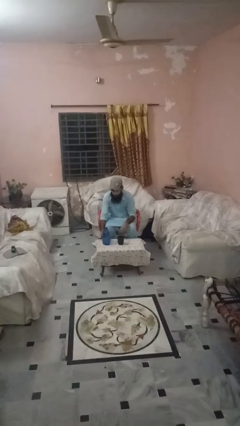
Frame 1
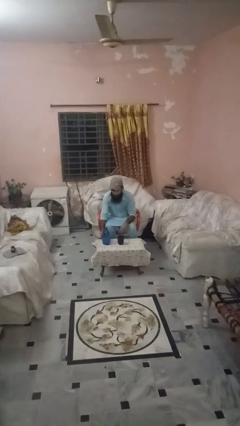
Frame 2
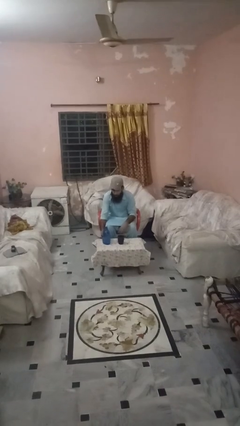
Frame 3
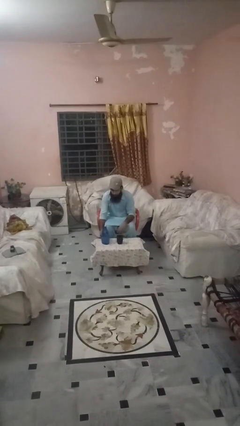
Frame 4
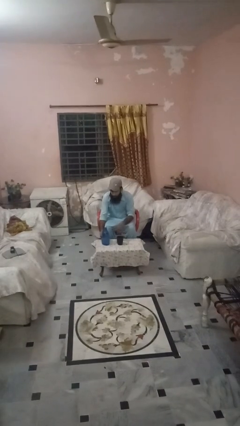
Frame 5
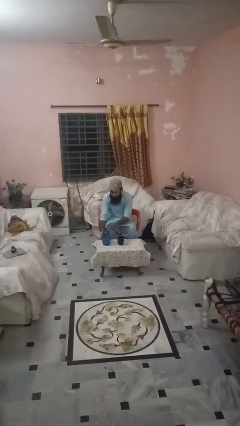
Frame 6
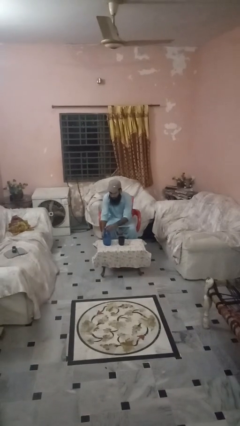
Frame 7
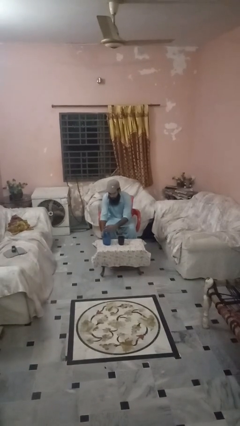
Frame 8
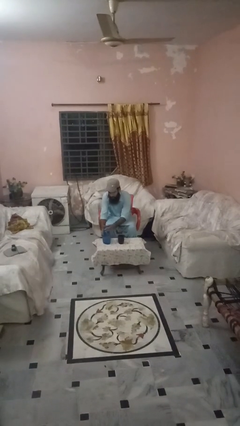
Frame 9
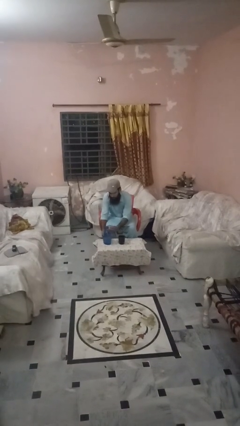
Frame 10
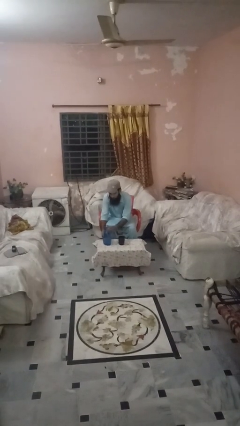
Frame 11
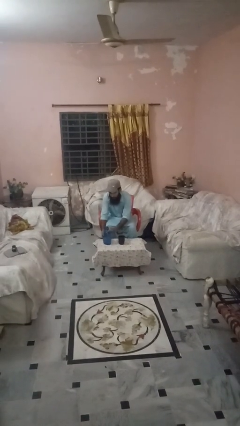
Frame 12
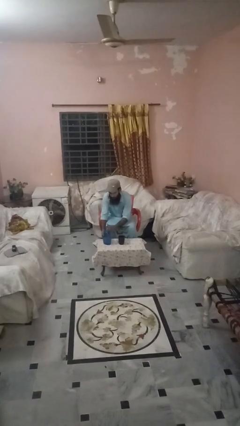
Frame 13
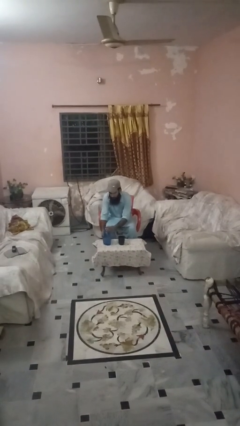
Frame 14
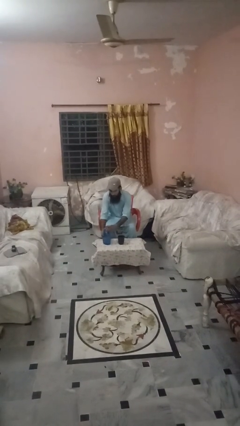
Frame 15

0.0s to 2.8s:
person screws lid to bottle

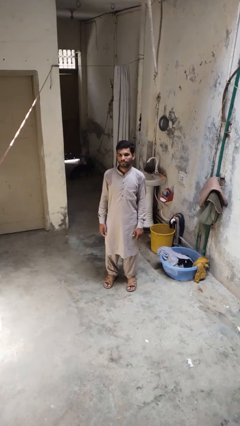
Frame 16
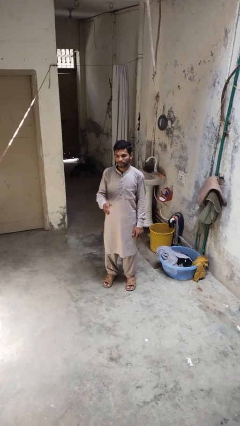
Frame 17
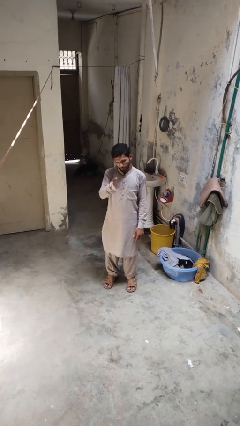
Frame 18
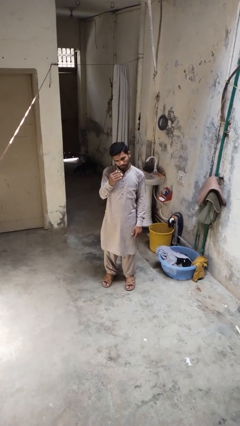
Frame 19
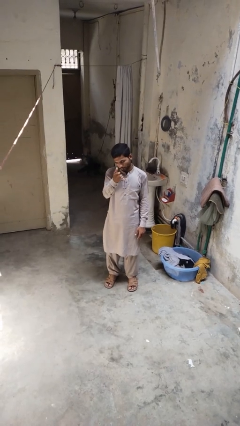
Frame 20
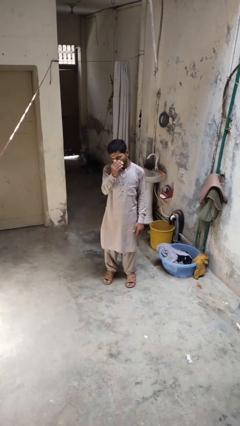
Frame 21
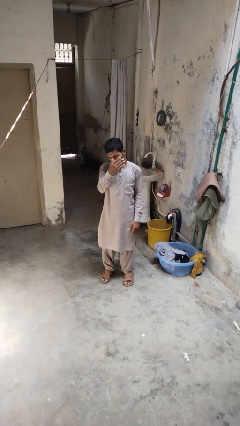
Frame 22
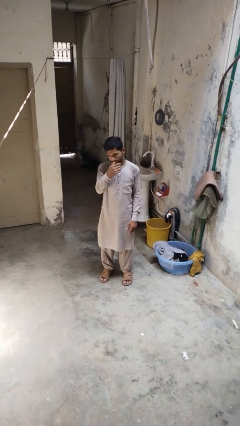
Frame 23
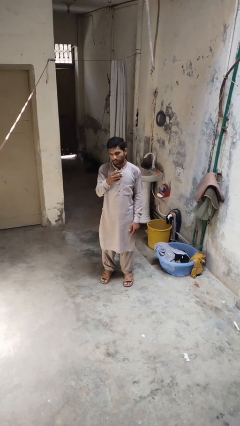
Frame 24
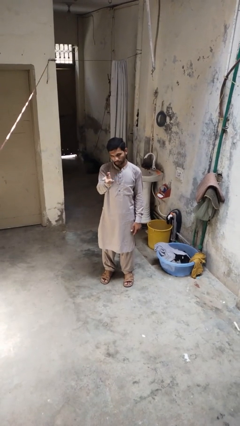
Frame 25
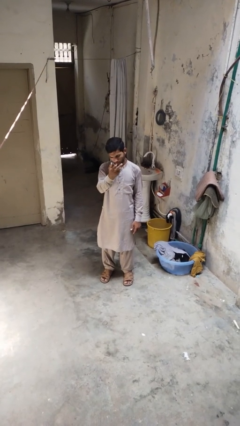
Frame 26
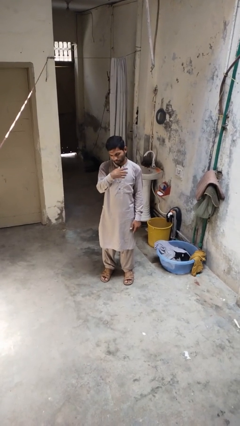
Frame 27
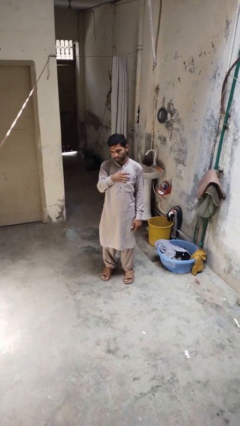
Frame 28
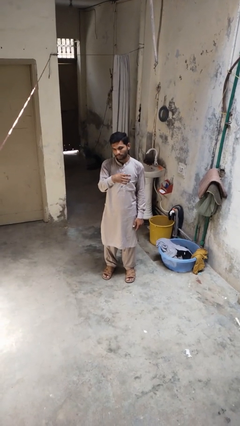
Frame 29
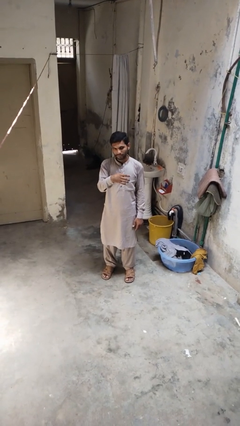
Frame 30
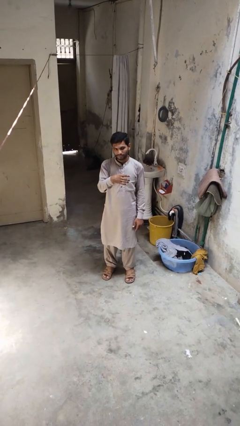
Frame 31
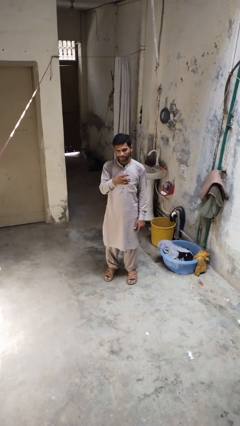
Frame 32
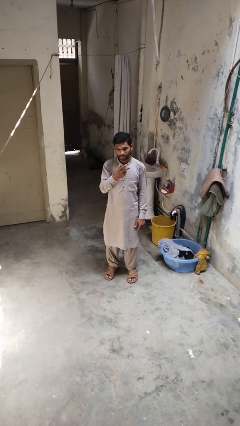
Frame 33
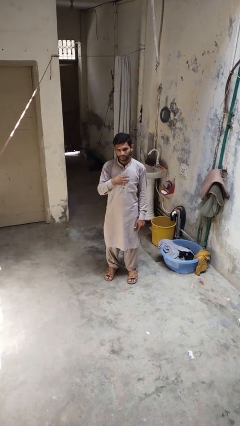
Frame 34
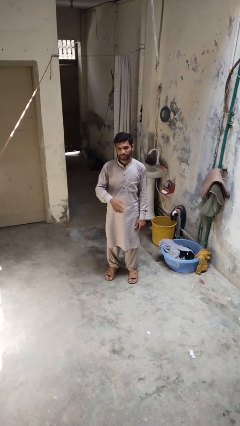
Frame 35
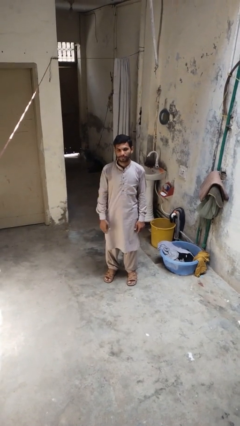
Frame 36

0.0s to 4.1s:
person gestures come here

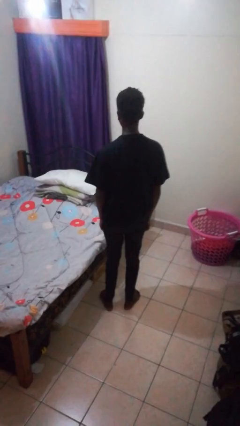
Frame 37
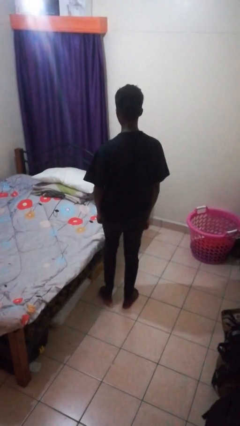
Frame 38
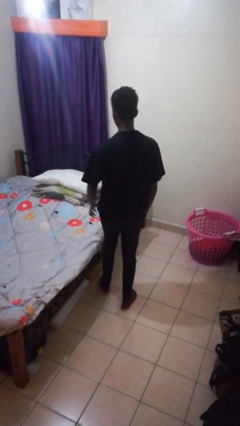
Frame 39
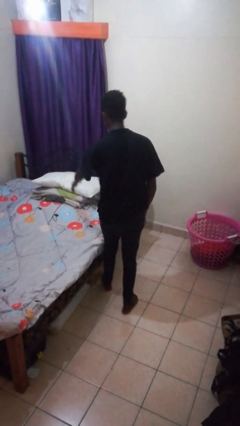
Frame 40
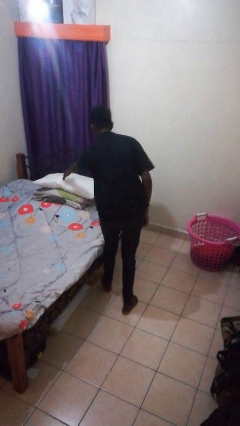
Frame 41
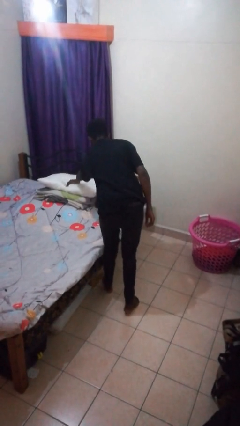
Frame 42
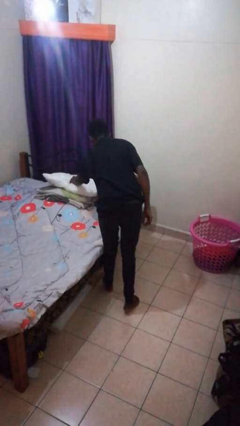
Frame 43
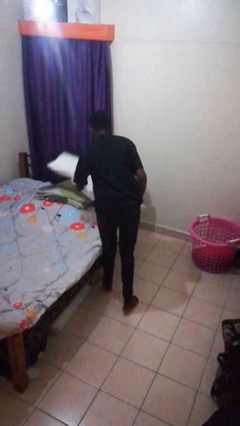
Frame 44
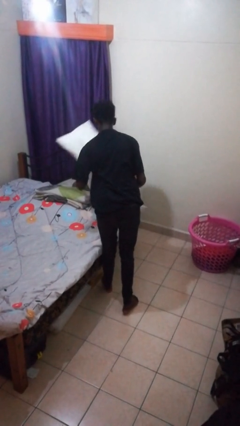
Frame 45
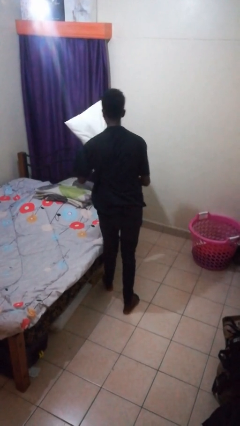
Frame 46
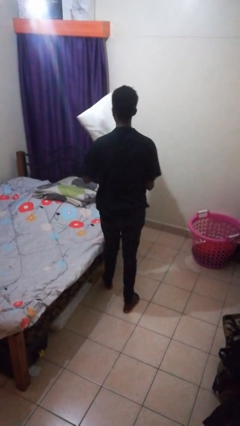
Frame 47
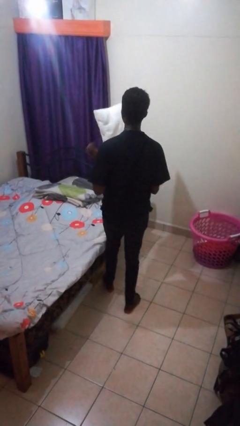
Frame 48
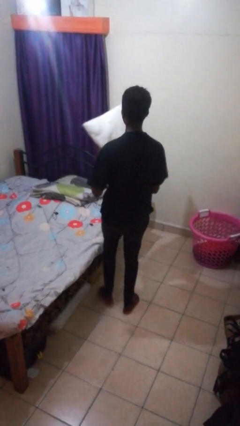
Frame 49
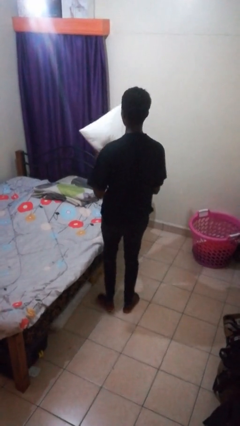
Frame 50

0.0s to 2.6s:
person picks up object from bed

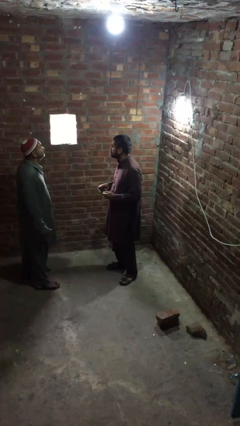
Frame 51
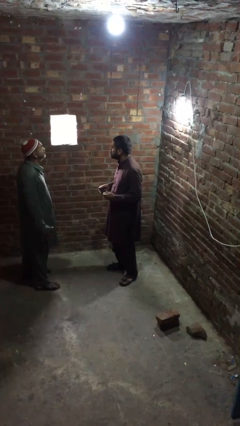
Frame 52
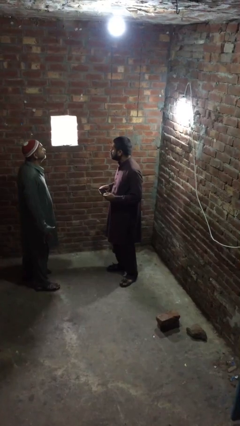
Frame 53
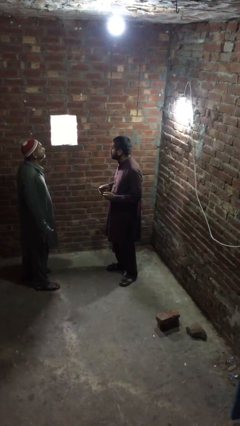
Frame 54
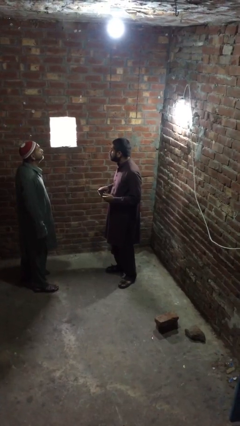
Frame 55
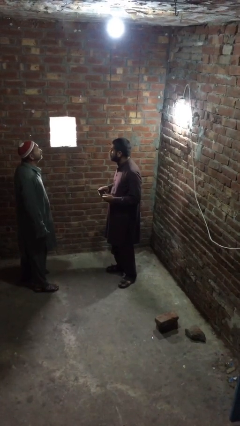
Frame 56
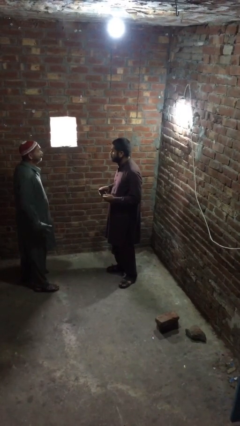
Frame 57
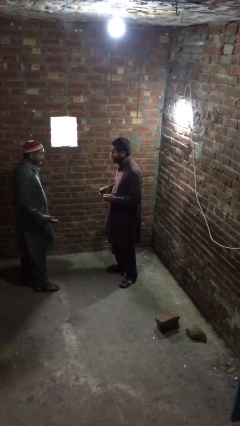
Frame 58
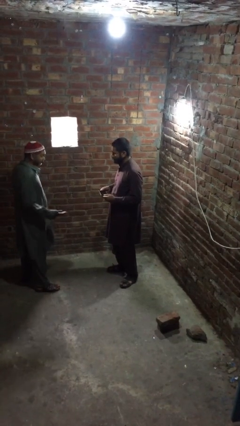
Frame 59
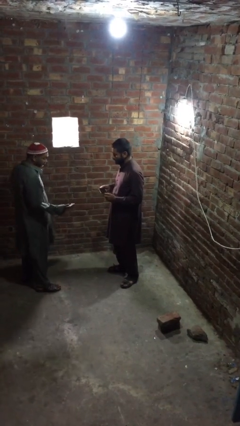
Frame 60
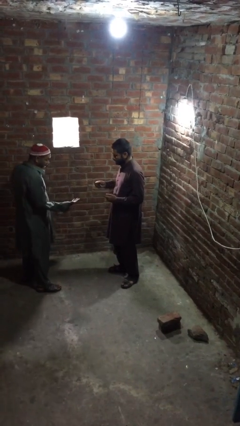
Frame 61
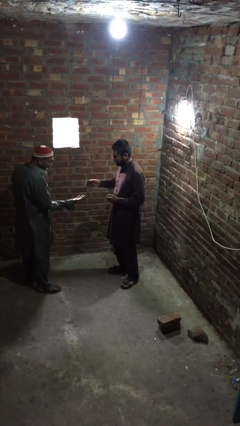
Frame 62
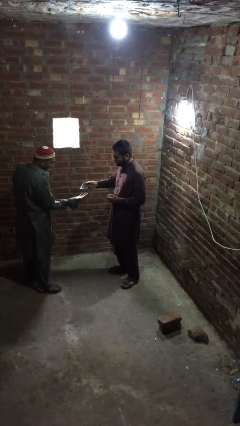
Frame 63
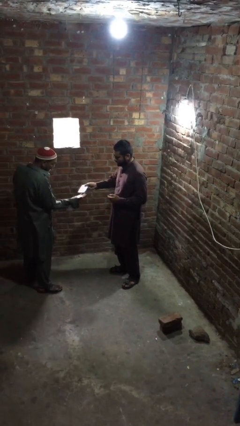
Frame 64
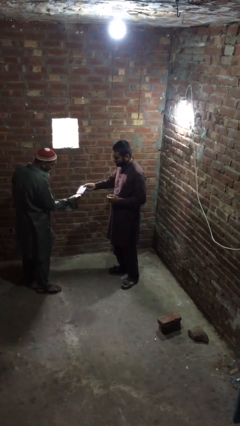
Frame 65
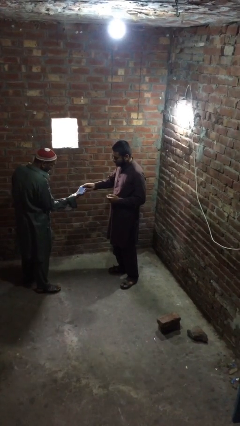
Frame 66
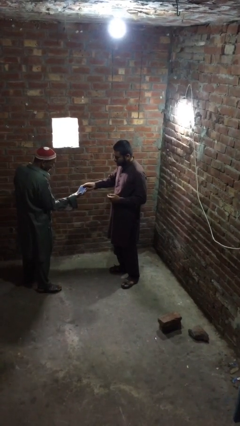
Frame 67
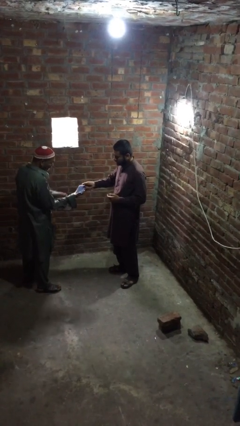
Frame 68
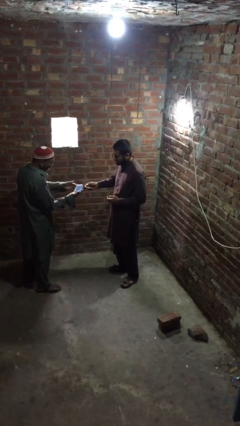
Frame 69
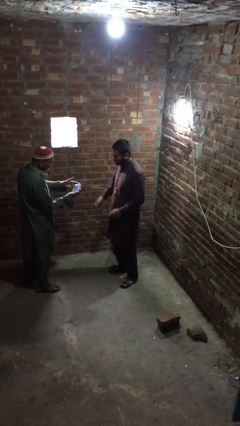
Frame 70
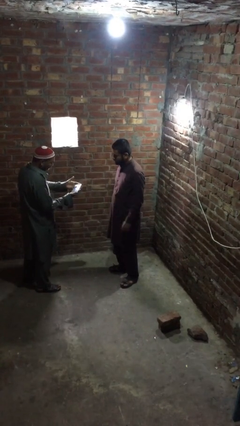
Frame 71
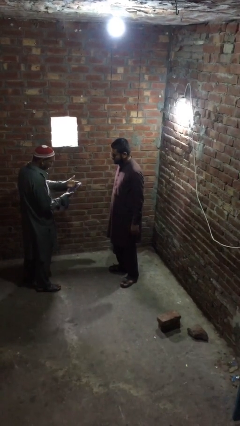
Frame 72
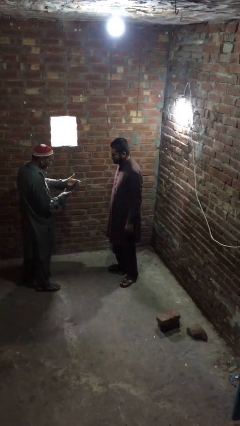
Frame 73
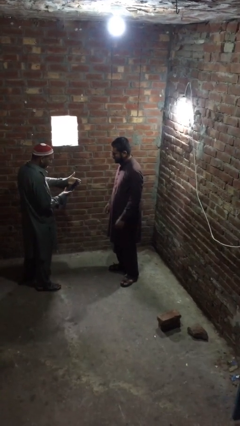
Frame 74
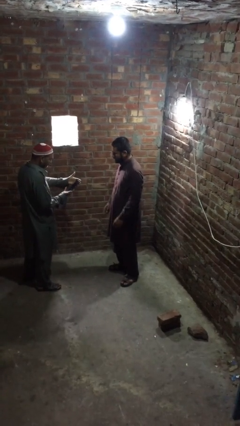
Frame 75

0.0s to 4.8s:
person transfers object to person

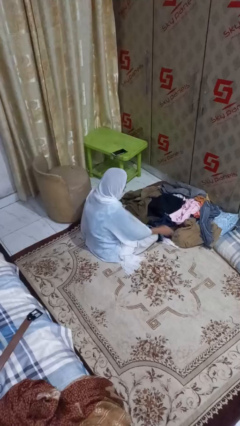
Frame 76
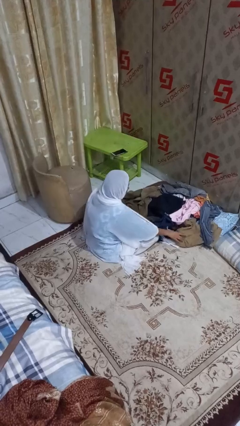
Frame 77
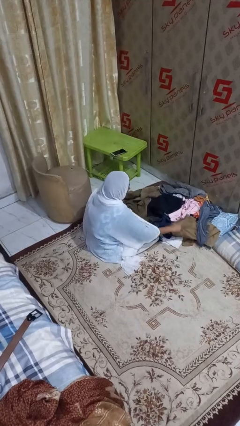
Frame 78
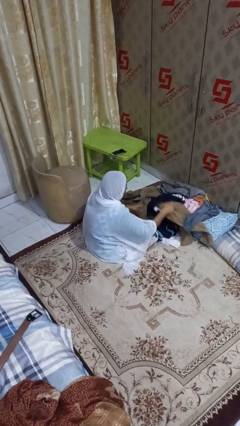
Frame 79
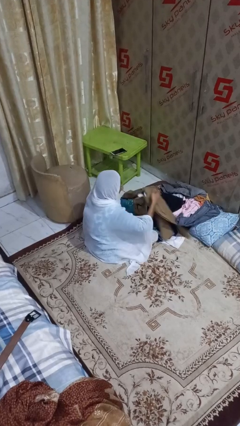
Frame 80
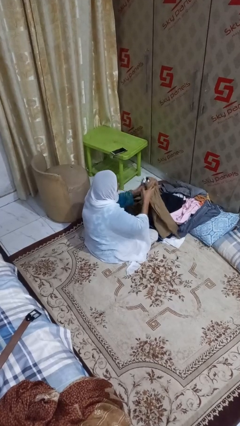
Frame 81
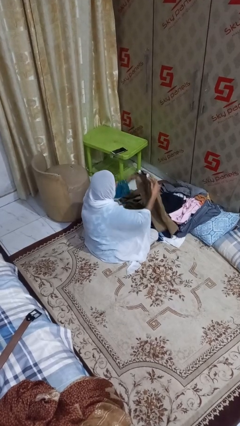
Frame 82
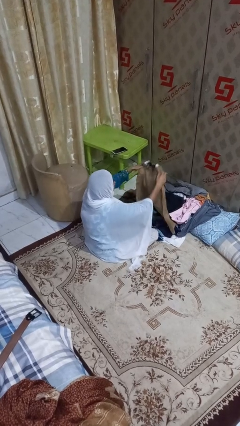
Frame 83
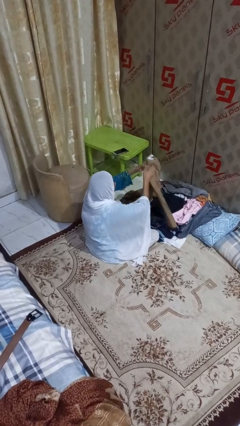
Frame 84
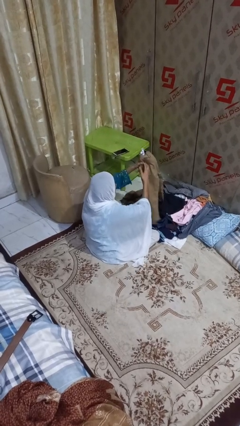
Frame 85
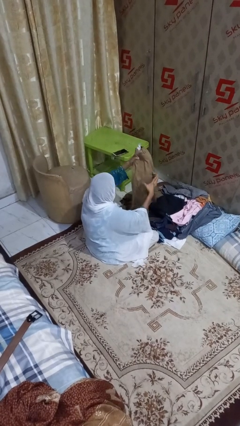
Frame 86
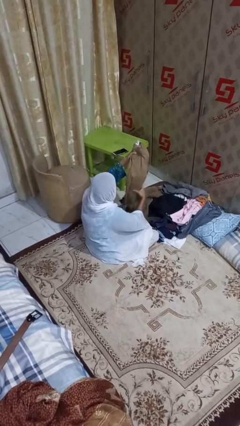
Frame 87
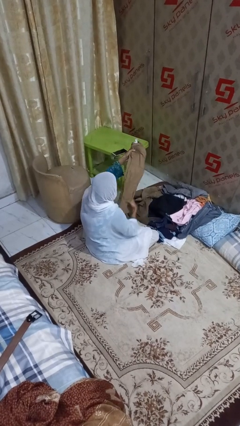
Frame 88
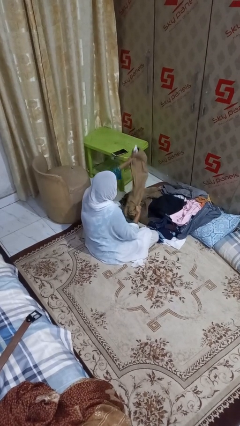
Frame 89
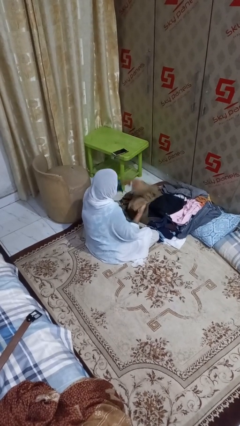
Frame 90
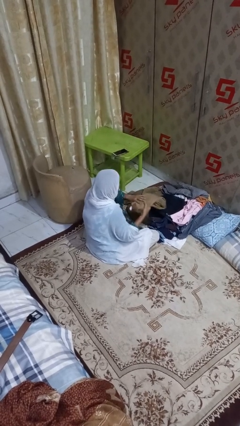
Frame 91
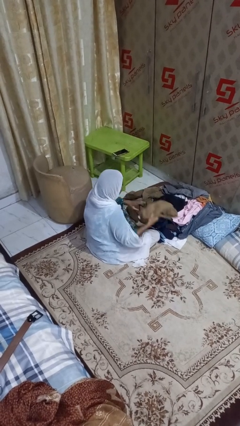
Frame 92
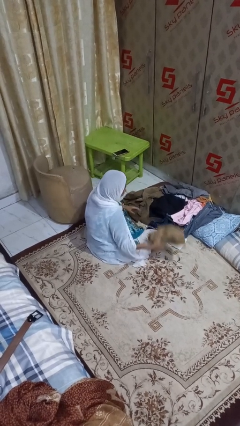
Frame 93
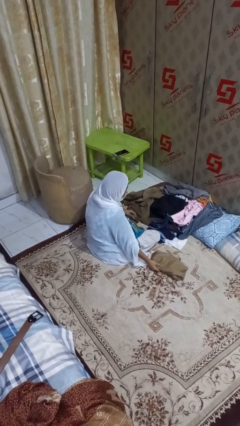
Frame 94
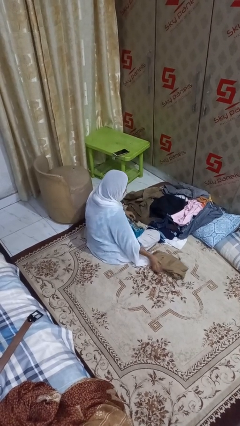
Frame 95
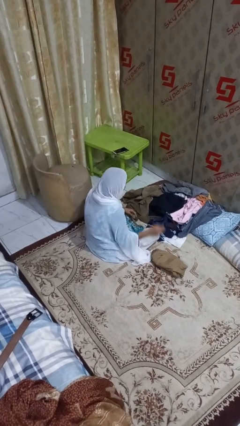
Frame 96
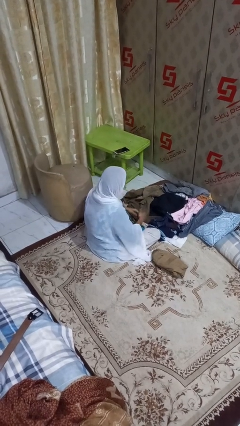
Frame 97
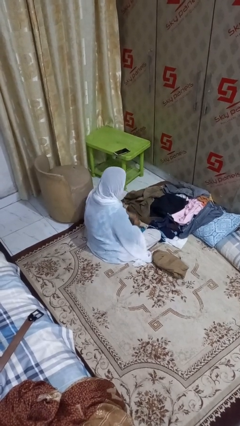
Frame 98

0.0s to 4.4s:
person folds pants
